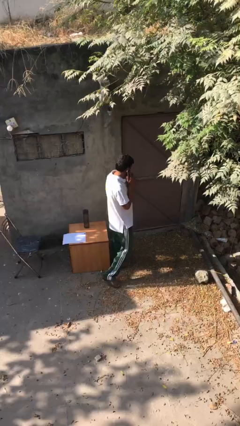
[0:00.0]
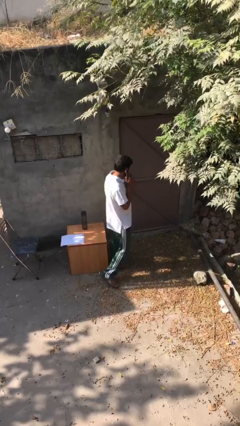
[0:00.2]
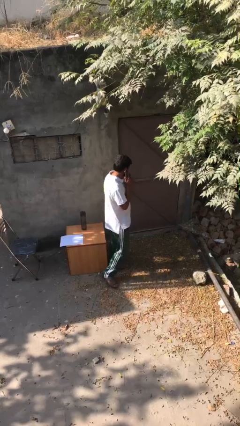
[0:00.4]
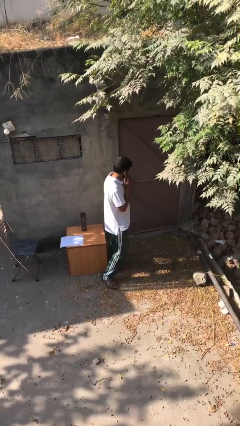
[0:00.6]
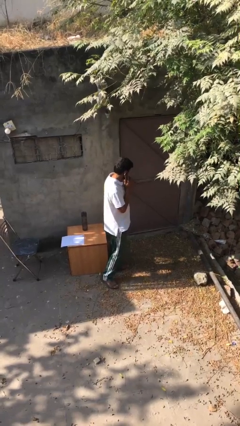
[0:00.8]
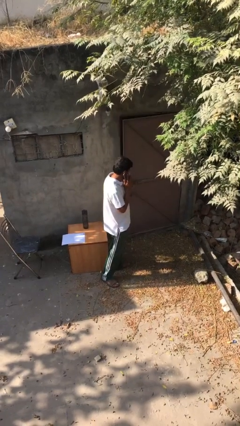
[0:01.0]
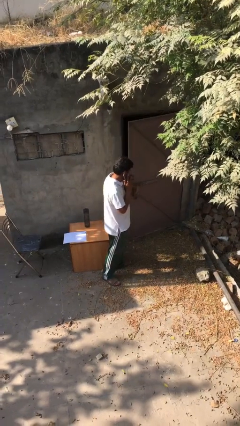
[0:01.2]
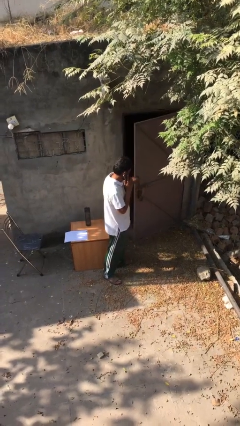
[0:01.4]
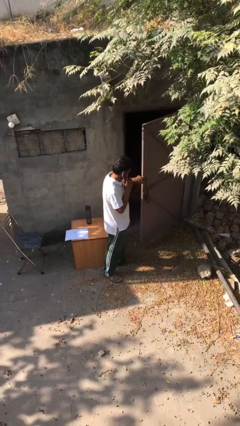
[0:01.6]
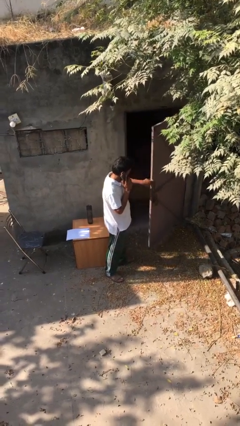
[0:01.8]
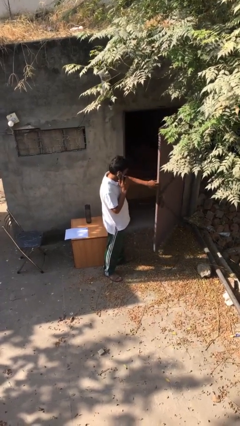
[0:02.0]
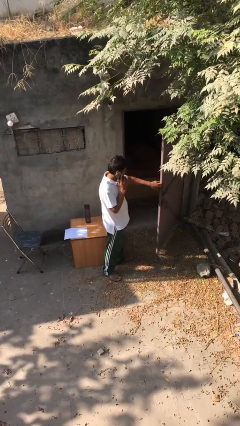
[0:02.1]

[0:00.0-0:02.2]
person opens facility door

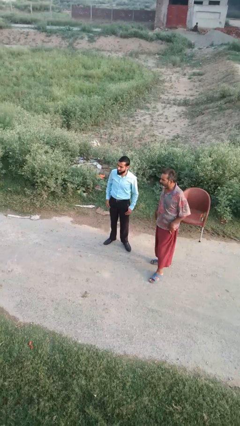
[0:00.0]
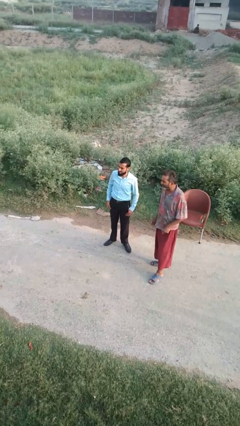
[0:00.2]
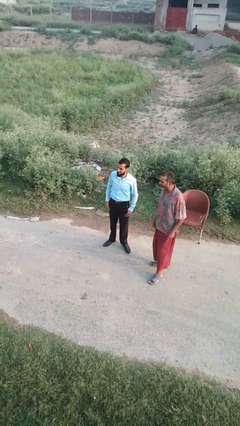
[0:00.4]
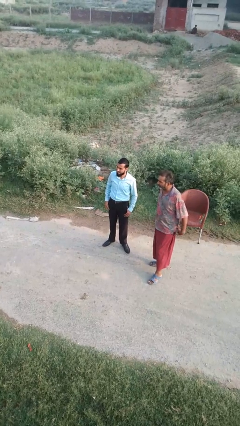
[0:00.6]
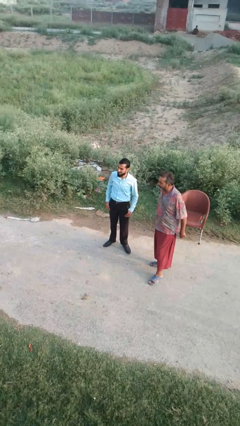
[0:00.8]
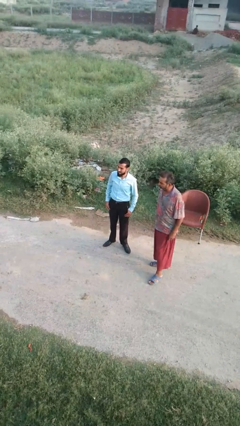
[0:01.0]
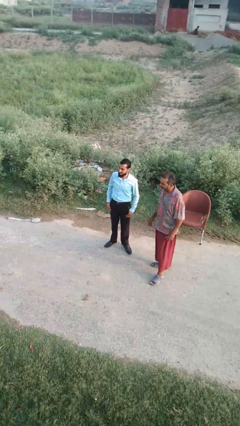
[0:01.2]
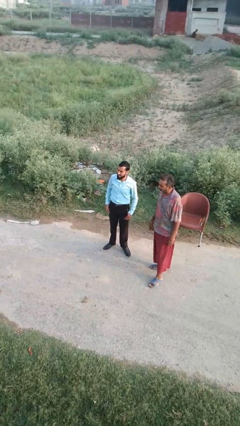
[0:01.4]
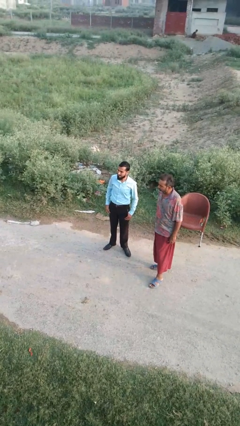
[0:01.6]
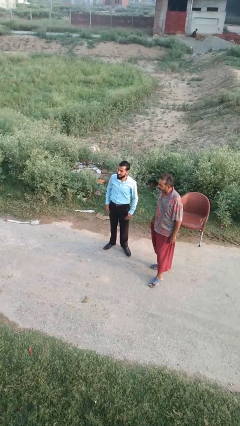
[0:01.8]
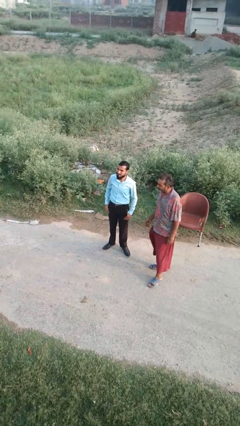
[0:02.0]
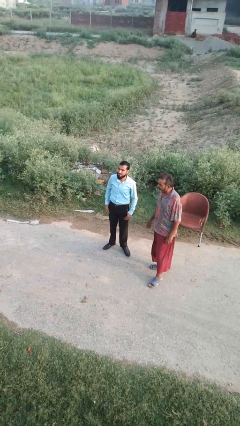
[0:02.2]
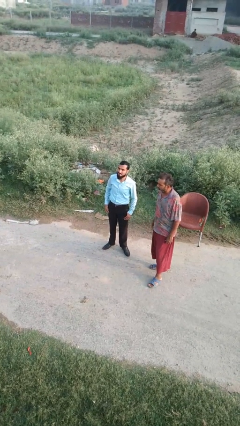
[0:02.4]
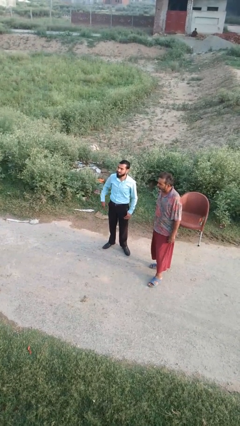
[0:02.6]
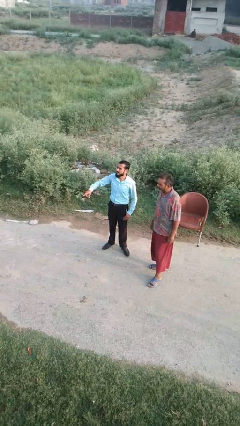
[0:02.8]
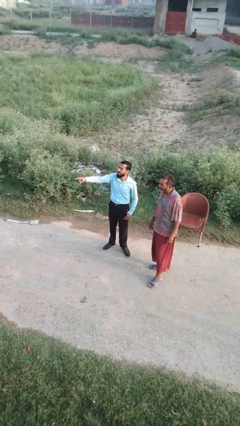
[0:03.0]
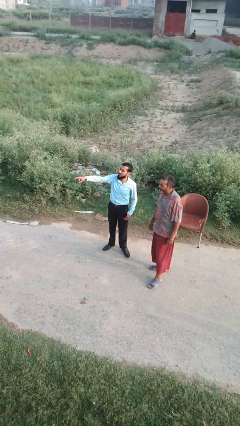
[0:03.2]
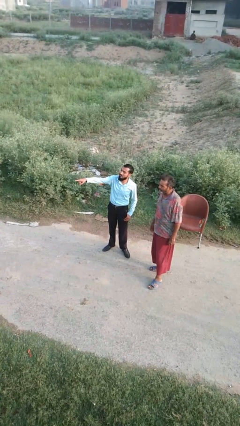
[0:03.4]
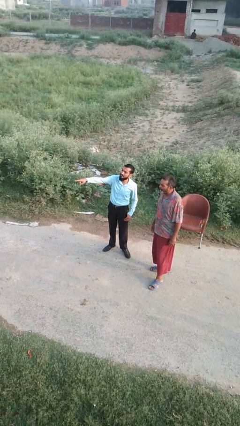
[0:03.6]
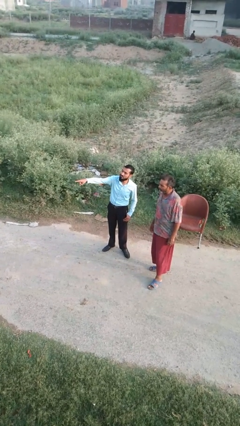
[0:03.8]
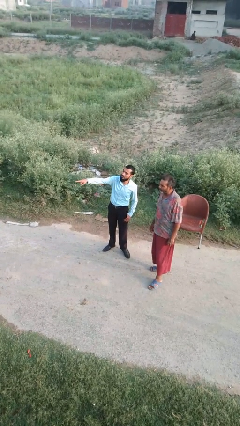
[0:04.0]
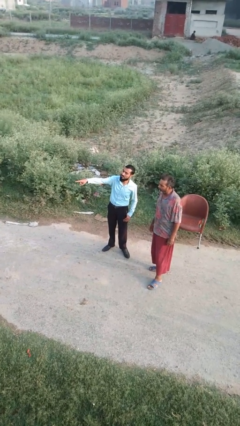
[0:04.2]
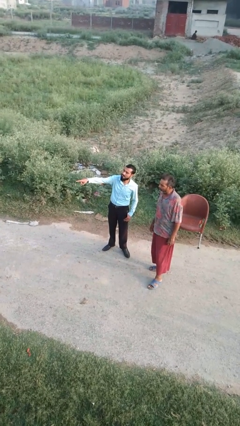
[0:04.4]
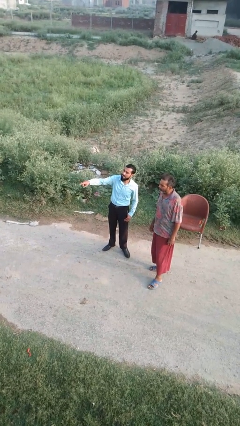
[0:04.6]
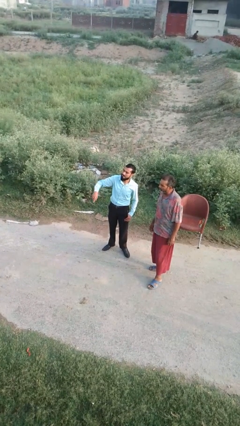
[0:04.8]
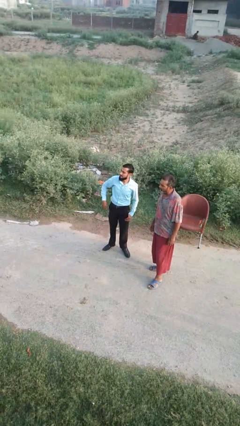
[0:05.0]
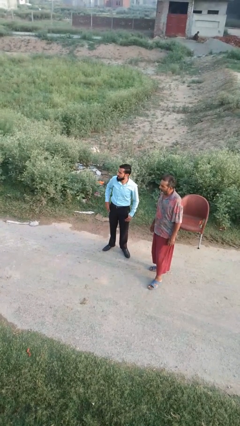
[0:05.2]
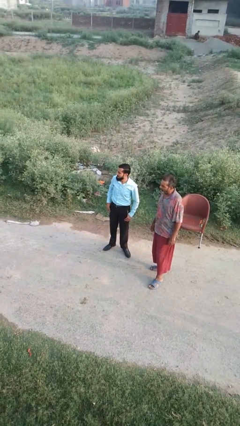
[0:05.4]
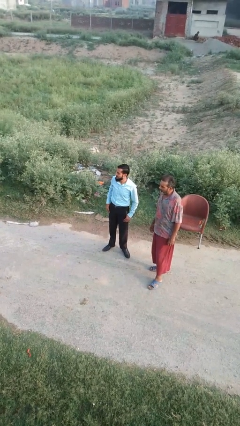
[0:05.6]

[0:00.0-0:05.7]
person points at person

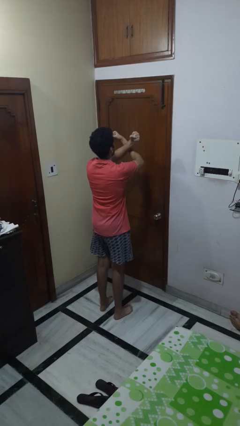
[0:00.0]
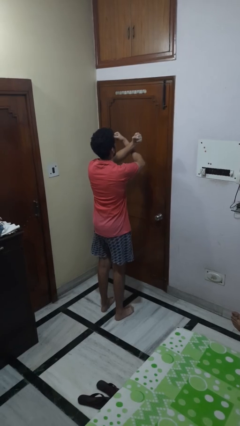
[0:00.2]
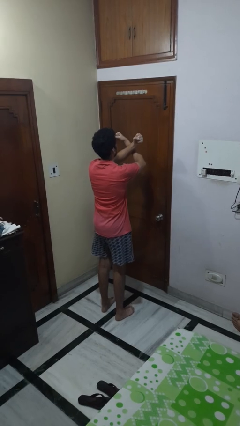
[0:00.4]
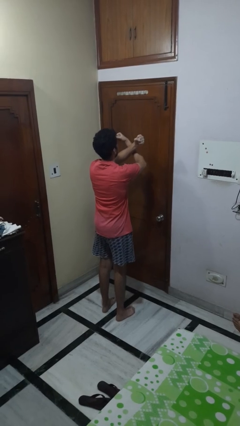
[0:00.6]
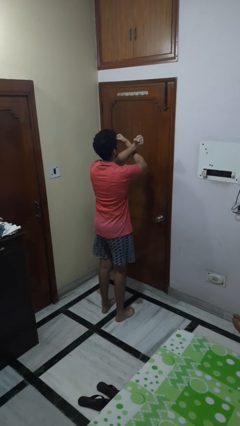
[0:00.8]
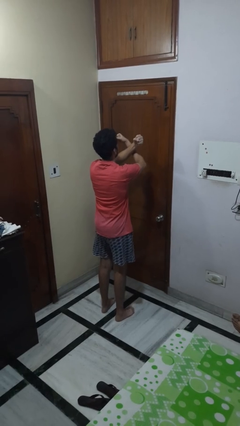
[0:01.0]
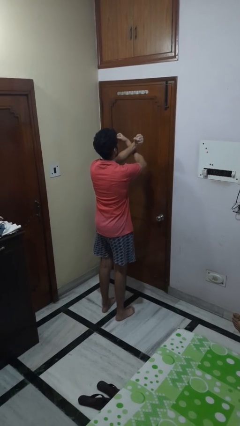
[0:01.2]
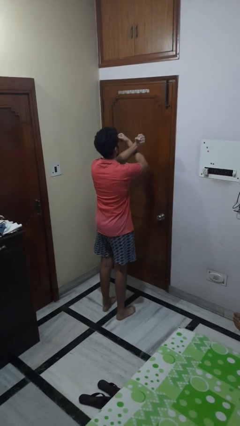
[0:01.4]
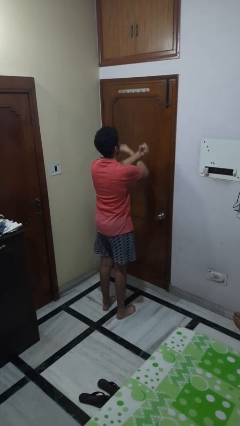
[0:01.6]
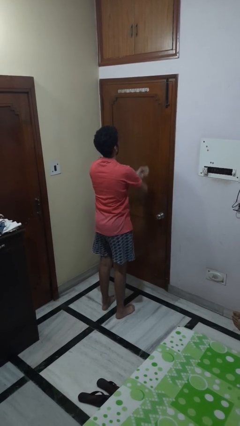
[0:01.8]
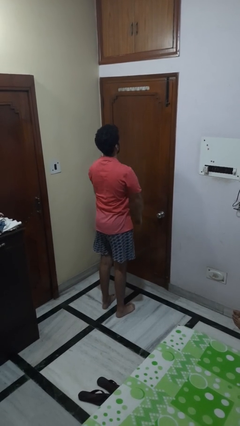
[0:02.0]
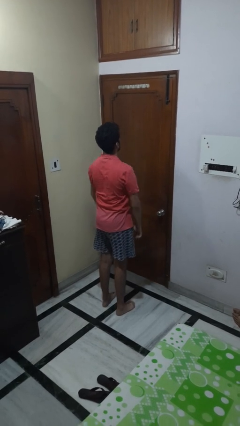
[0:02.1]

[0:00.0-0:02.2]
person gestures arms x

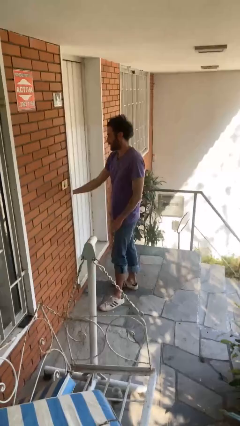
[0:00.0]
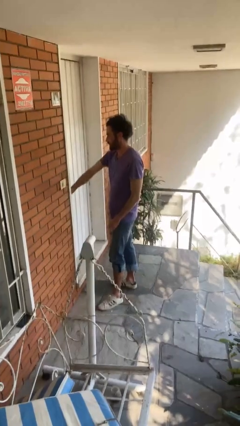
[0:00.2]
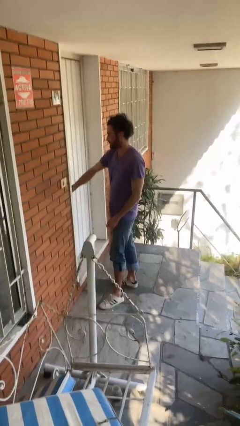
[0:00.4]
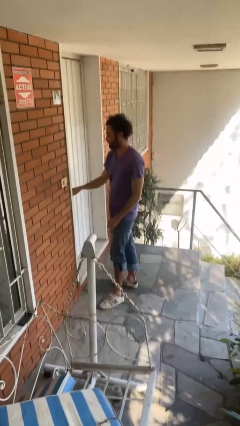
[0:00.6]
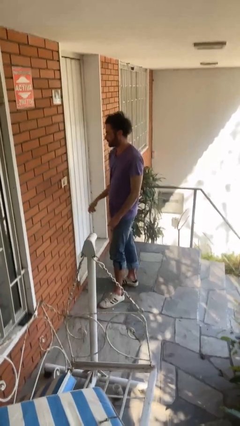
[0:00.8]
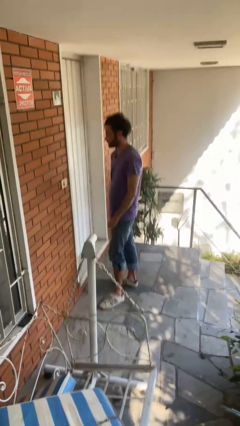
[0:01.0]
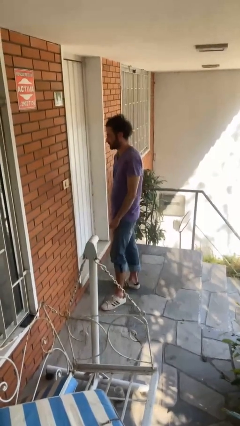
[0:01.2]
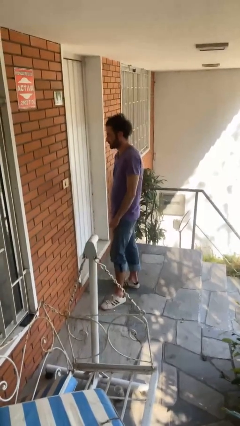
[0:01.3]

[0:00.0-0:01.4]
person locks door with keys

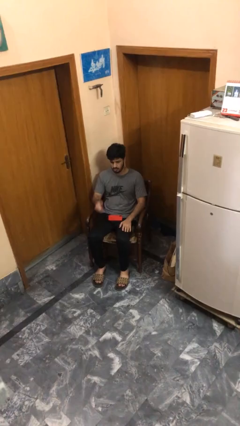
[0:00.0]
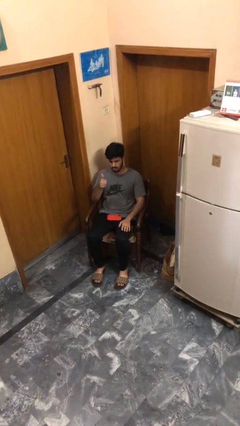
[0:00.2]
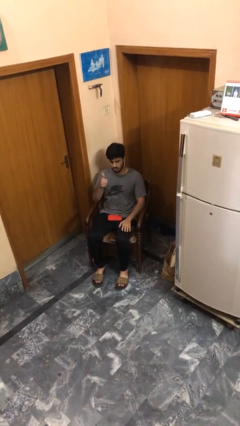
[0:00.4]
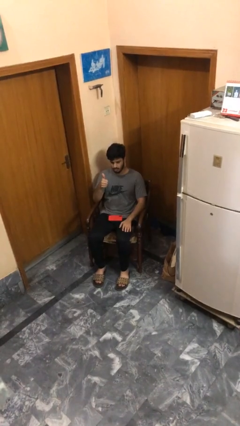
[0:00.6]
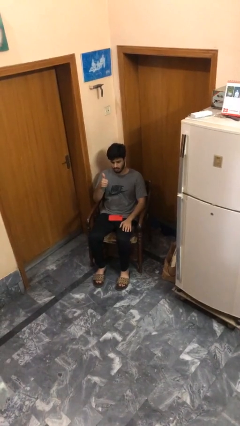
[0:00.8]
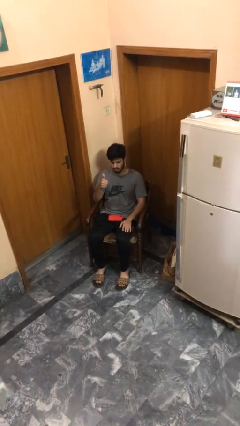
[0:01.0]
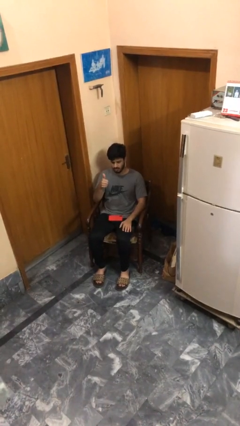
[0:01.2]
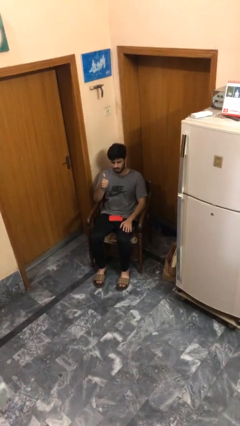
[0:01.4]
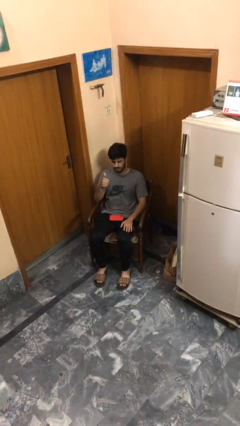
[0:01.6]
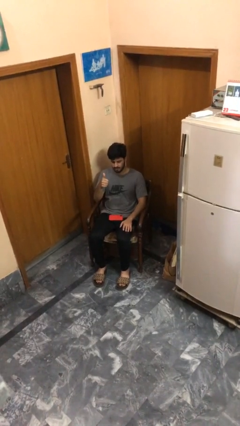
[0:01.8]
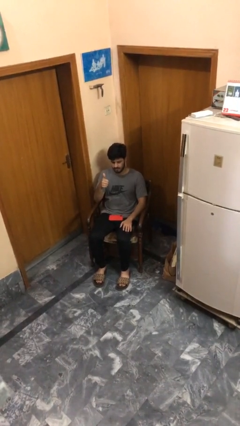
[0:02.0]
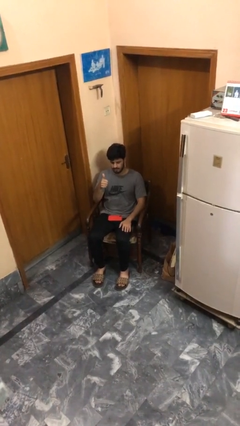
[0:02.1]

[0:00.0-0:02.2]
person gestures thumbs up

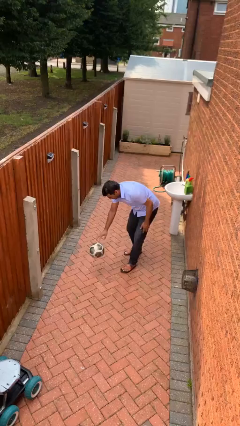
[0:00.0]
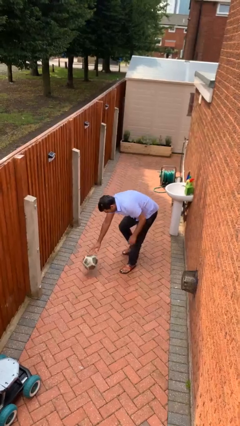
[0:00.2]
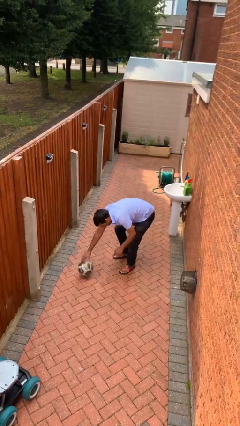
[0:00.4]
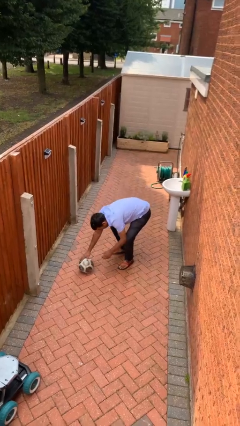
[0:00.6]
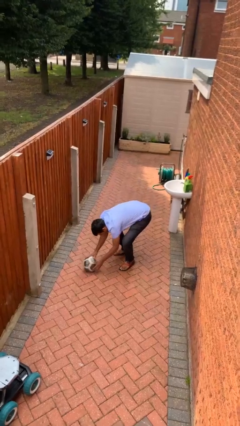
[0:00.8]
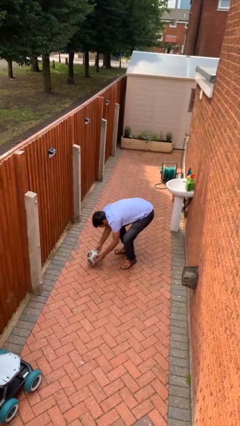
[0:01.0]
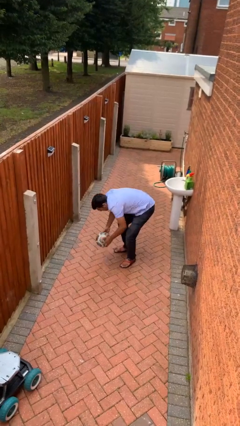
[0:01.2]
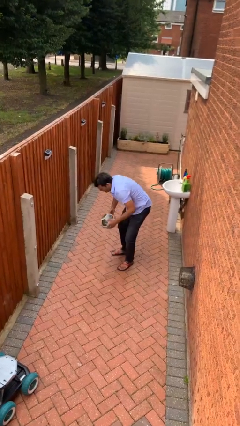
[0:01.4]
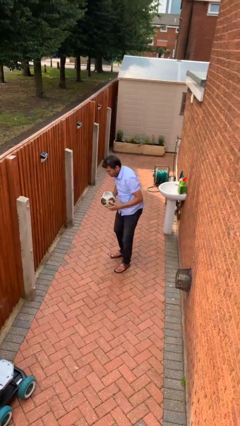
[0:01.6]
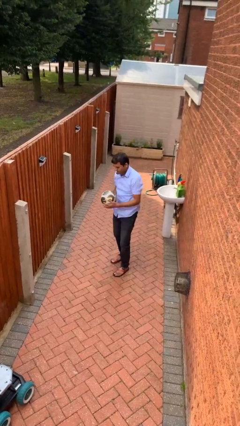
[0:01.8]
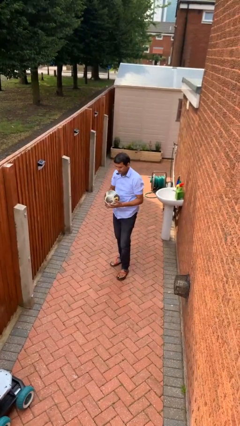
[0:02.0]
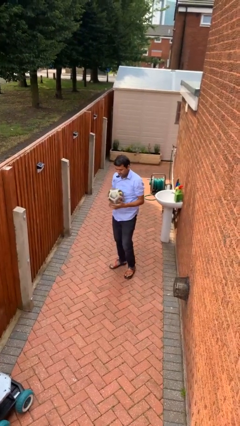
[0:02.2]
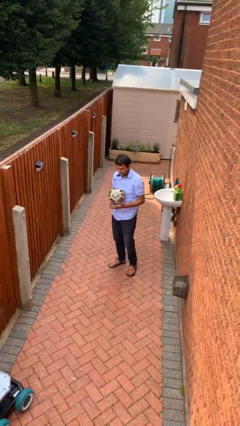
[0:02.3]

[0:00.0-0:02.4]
person picks up object from floor

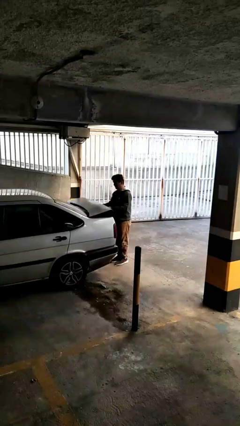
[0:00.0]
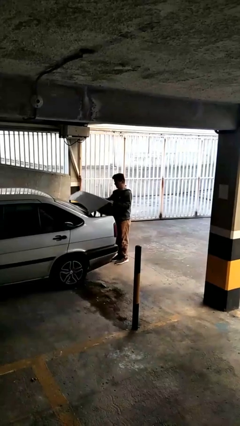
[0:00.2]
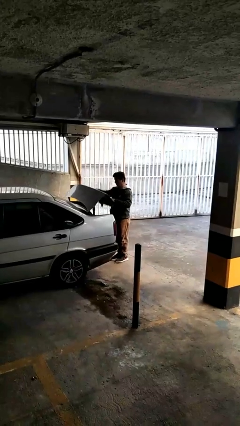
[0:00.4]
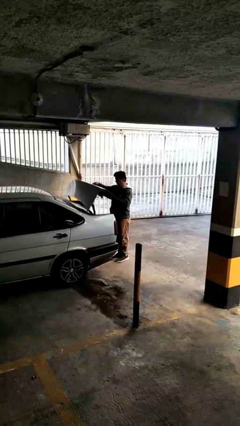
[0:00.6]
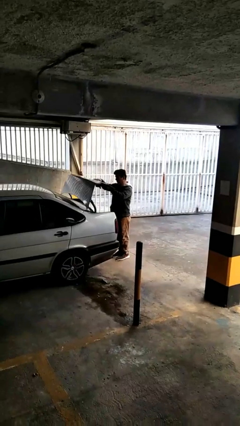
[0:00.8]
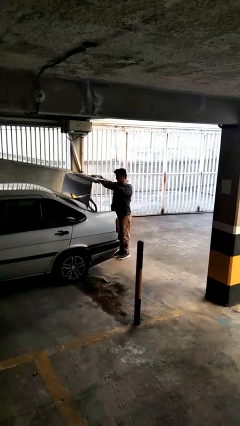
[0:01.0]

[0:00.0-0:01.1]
person opens car trunk
